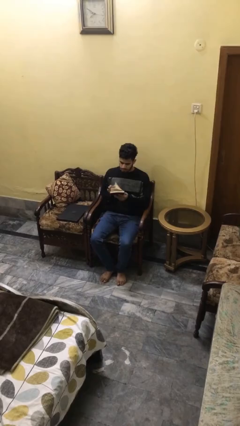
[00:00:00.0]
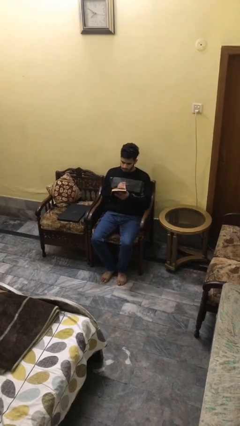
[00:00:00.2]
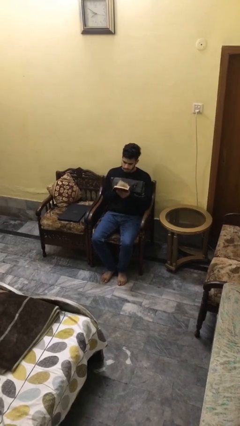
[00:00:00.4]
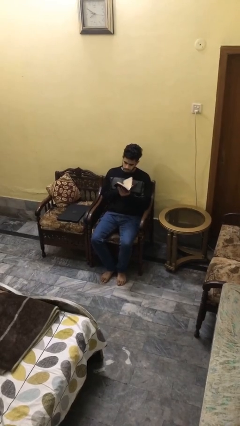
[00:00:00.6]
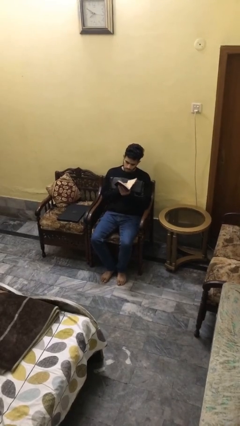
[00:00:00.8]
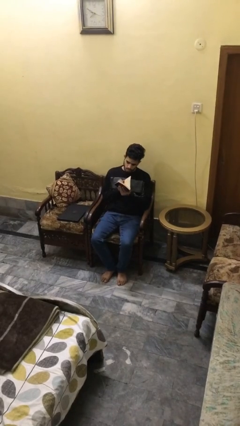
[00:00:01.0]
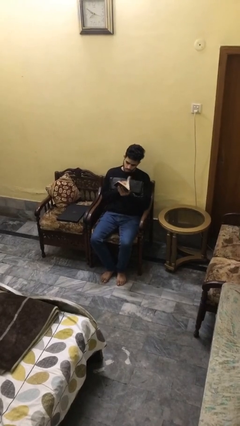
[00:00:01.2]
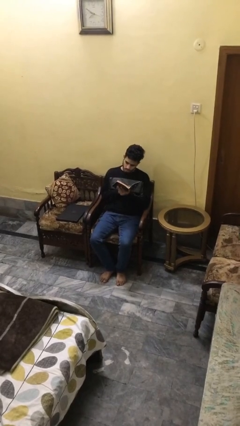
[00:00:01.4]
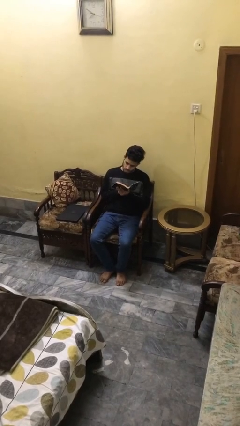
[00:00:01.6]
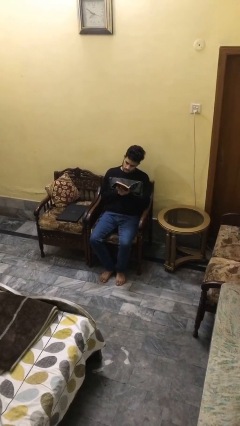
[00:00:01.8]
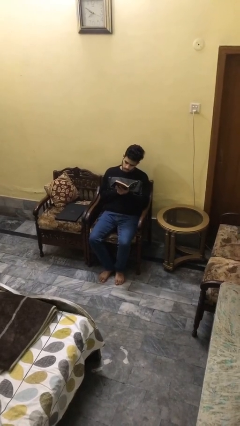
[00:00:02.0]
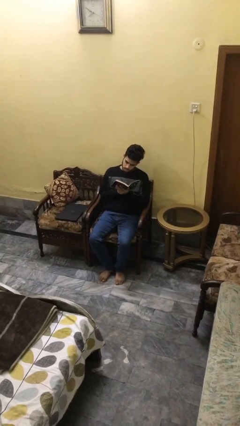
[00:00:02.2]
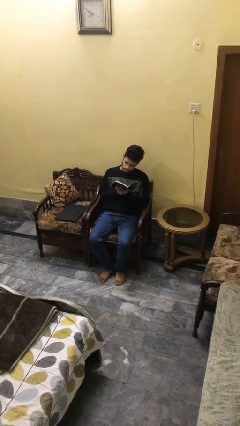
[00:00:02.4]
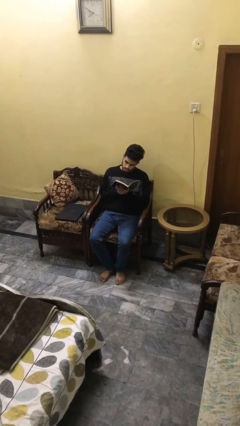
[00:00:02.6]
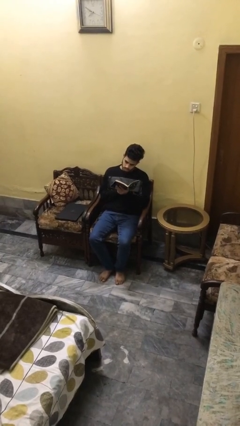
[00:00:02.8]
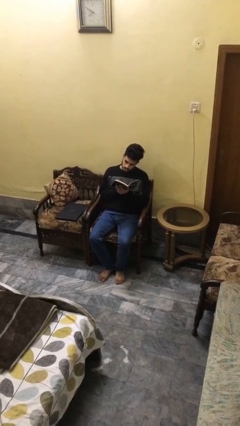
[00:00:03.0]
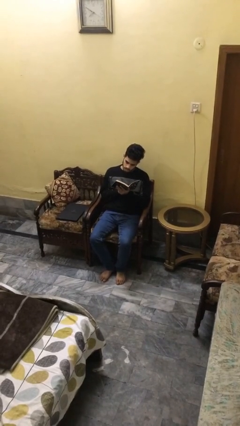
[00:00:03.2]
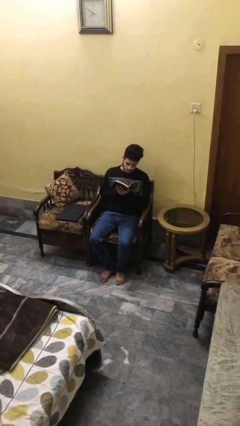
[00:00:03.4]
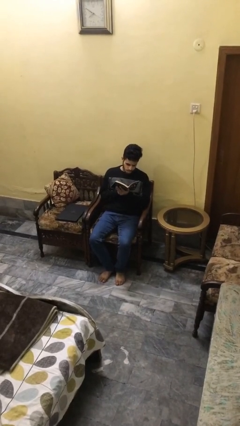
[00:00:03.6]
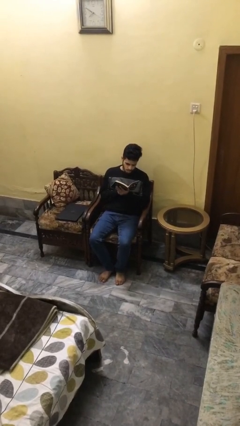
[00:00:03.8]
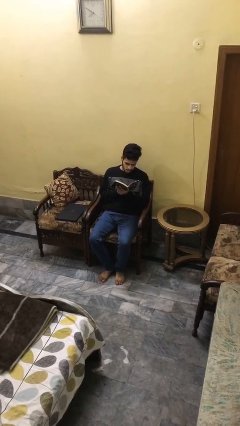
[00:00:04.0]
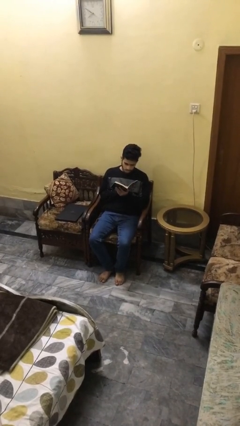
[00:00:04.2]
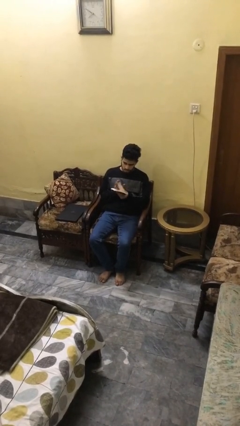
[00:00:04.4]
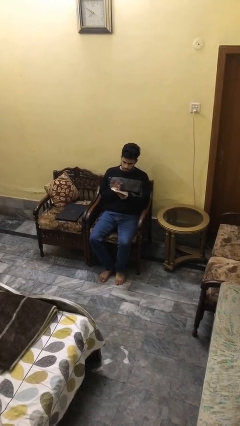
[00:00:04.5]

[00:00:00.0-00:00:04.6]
person reads document

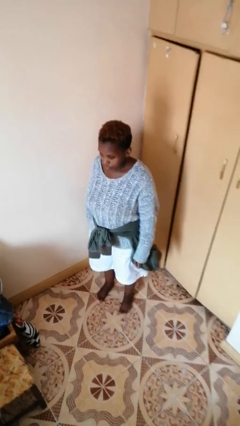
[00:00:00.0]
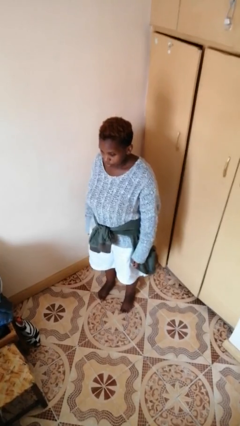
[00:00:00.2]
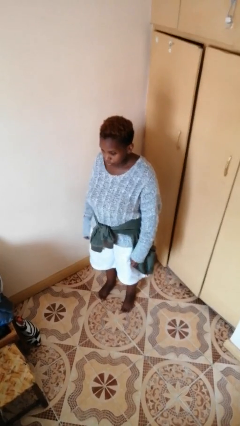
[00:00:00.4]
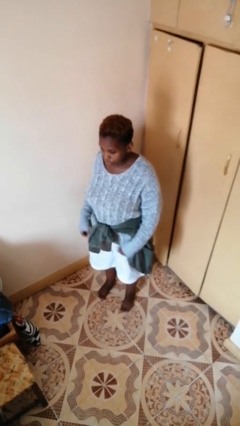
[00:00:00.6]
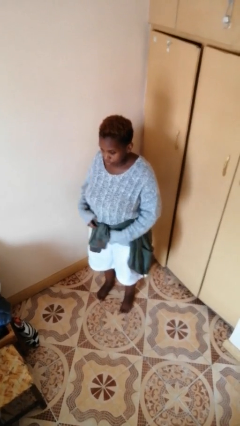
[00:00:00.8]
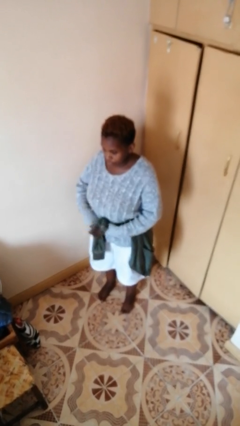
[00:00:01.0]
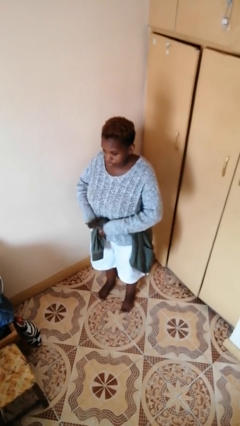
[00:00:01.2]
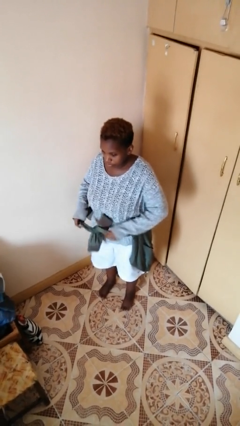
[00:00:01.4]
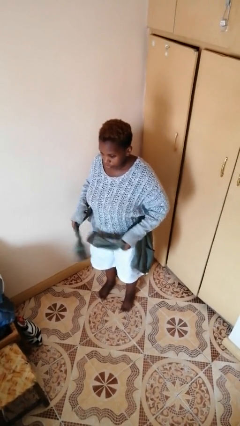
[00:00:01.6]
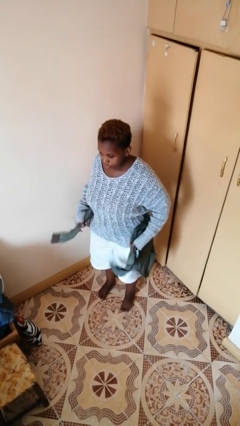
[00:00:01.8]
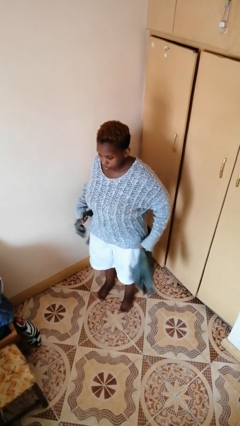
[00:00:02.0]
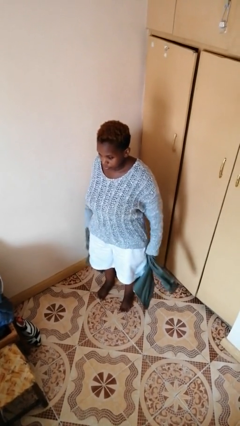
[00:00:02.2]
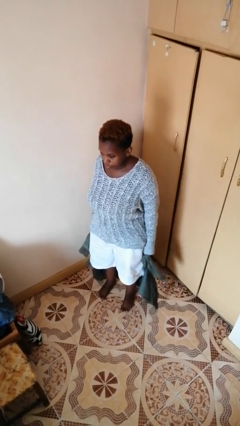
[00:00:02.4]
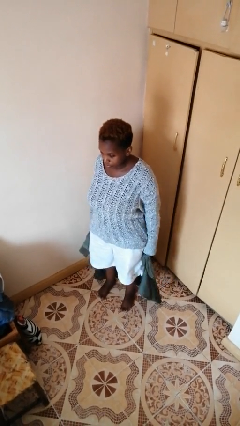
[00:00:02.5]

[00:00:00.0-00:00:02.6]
person unties jacket around waist

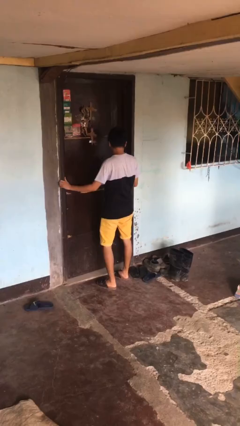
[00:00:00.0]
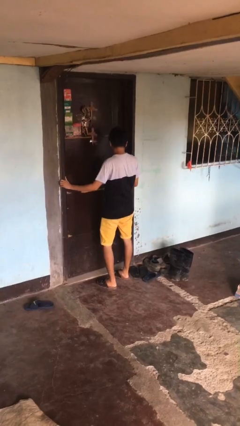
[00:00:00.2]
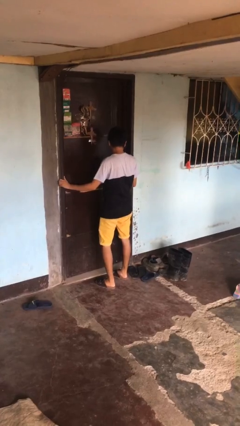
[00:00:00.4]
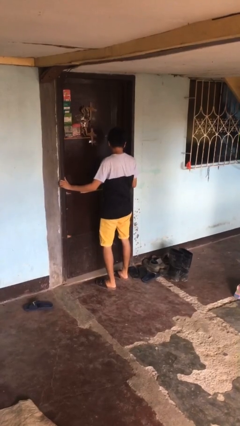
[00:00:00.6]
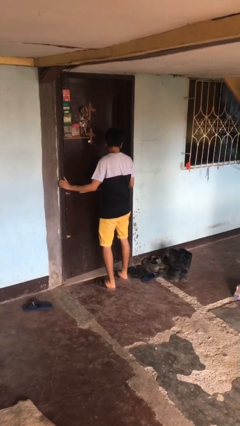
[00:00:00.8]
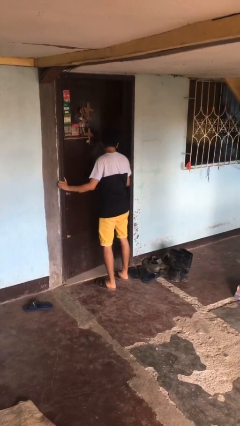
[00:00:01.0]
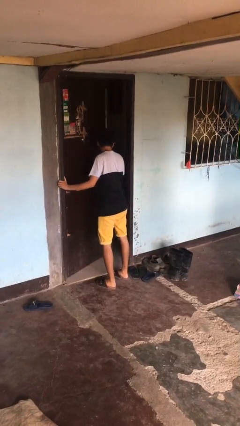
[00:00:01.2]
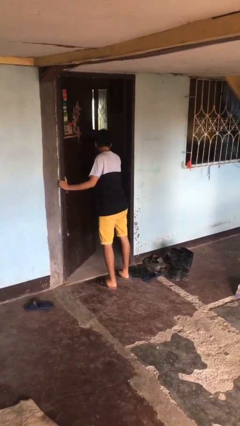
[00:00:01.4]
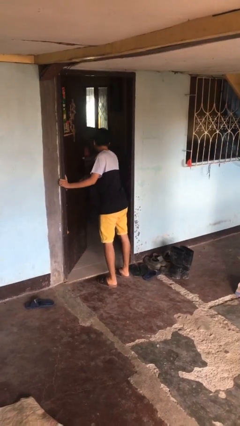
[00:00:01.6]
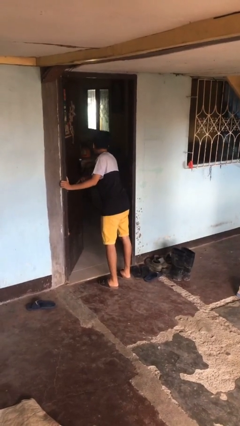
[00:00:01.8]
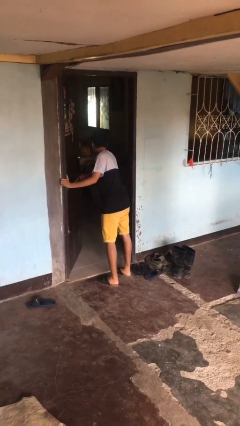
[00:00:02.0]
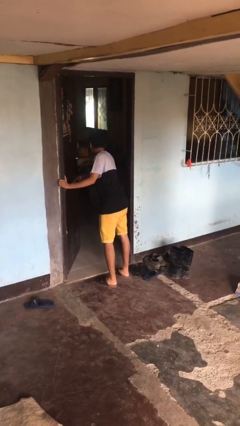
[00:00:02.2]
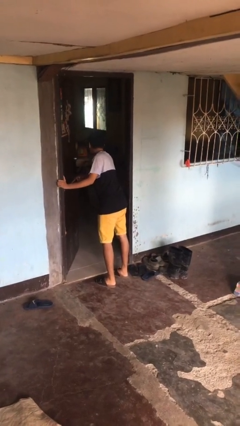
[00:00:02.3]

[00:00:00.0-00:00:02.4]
person opens facility door

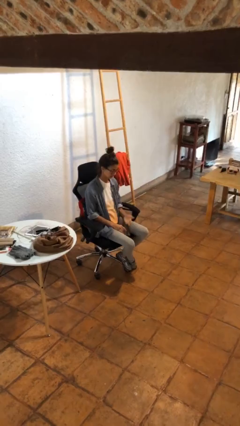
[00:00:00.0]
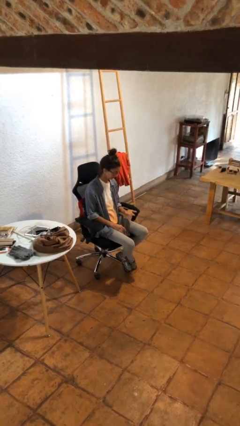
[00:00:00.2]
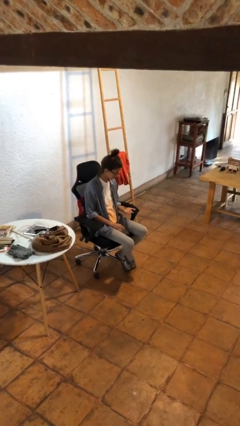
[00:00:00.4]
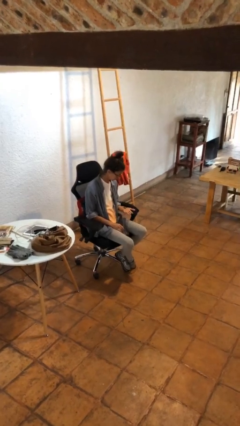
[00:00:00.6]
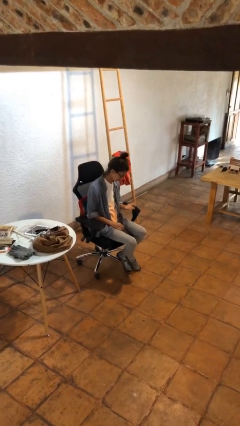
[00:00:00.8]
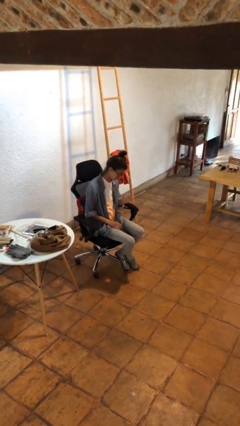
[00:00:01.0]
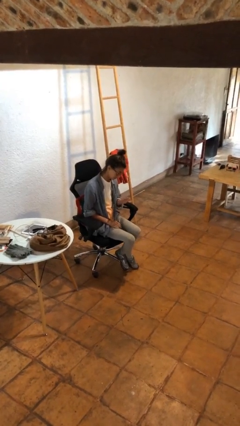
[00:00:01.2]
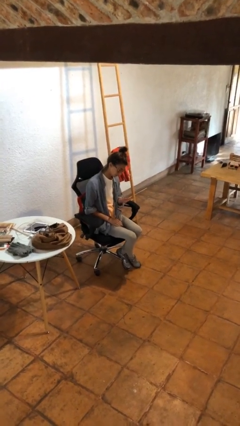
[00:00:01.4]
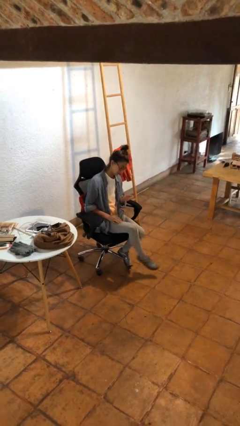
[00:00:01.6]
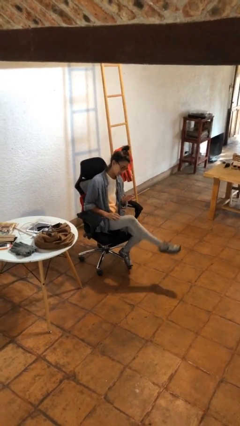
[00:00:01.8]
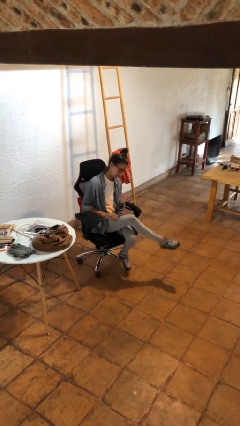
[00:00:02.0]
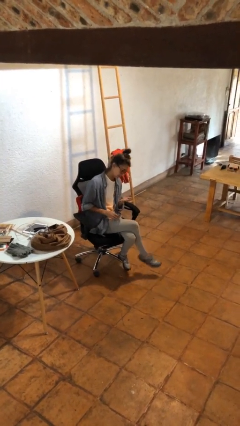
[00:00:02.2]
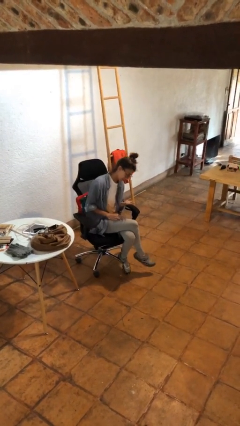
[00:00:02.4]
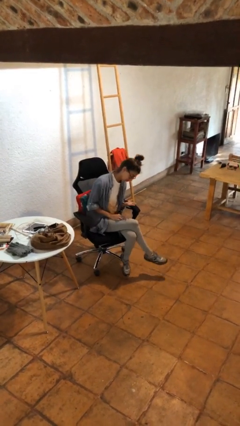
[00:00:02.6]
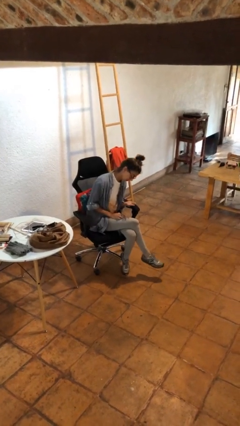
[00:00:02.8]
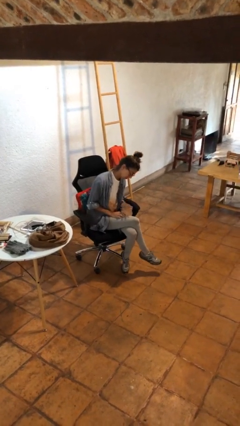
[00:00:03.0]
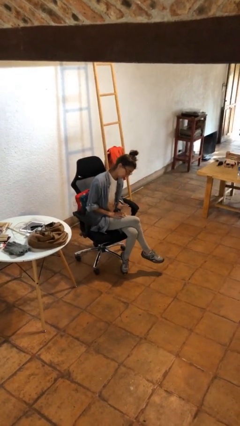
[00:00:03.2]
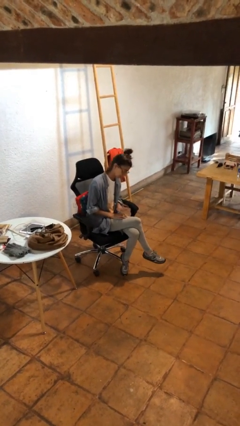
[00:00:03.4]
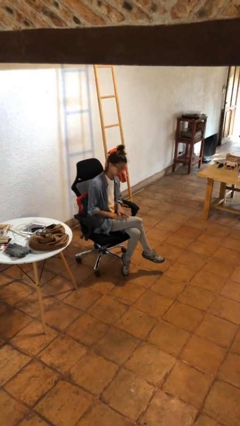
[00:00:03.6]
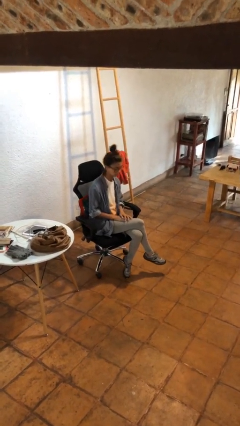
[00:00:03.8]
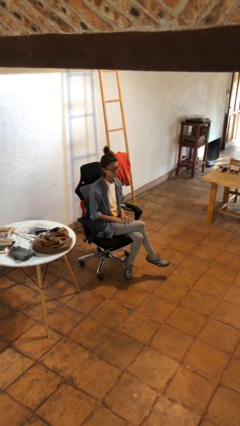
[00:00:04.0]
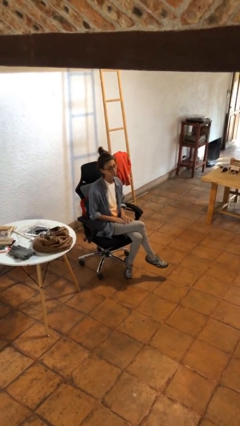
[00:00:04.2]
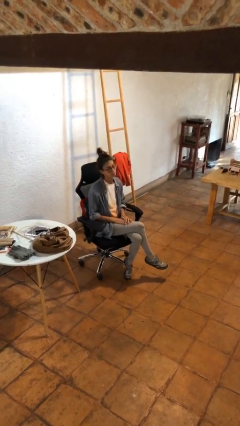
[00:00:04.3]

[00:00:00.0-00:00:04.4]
person looks at hands in lap

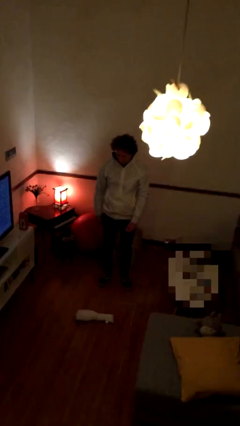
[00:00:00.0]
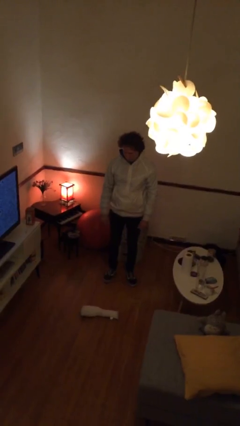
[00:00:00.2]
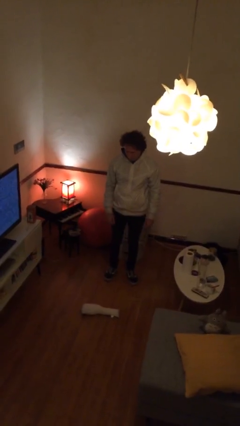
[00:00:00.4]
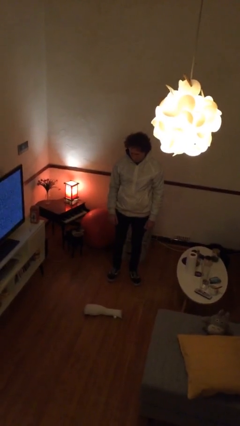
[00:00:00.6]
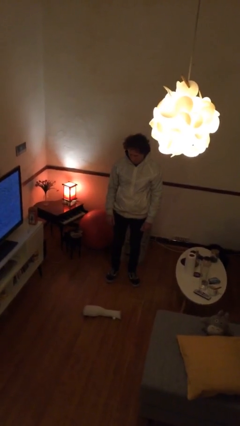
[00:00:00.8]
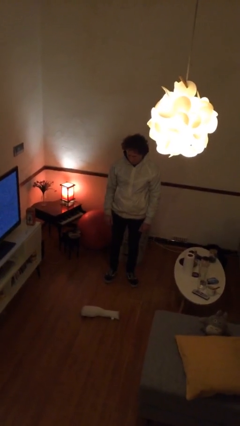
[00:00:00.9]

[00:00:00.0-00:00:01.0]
person stands up from floor

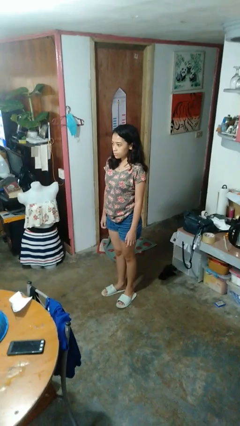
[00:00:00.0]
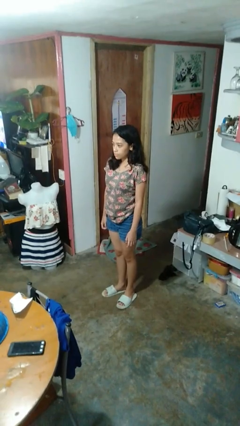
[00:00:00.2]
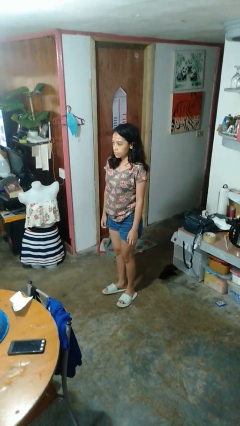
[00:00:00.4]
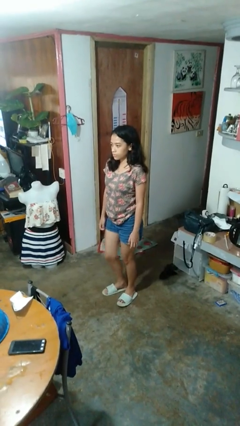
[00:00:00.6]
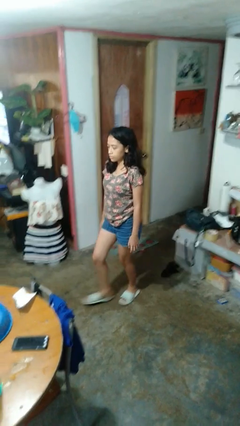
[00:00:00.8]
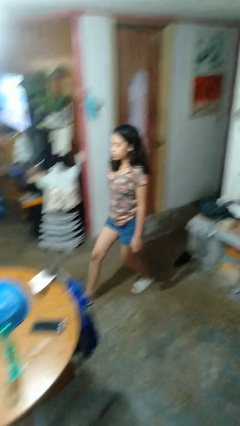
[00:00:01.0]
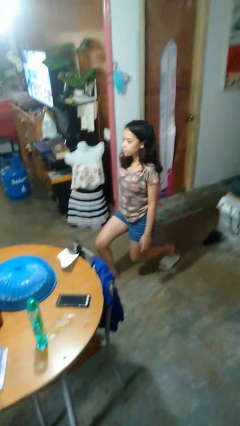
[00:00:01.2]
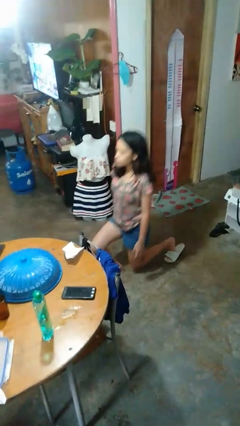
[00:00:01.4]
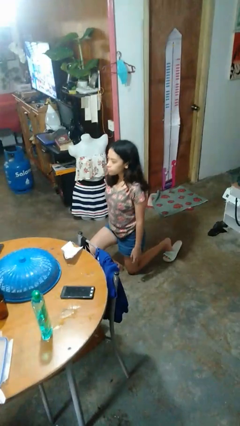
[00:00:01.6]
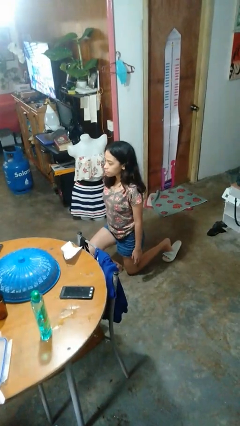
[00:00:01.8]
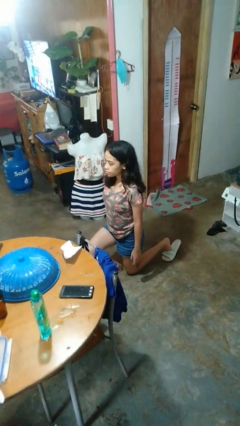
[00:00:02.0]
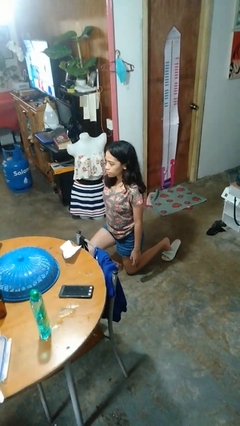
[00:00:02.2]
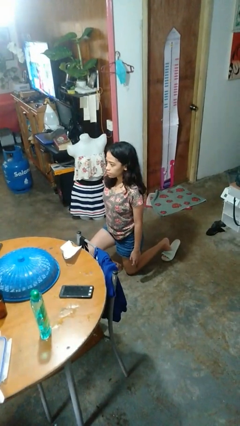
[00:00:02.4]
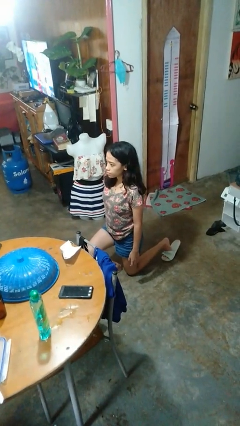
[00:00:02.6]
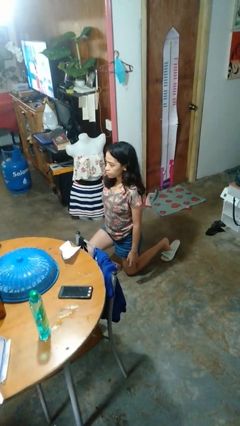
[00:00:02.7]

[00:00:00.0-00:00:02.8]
person kneels
